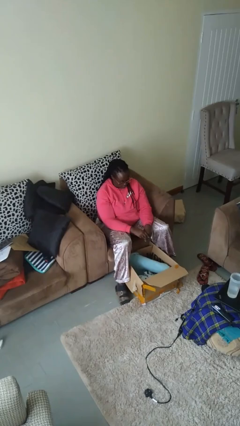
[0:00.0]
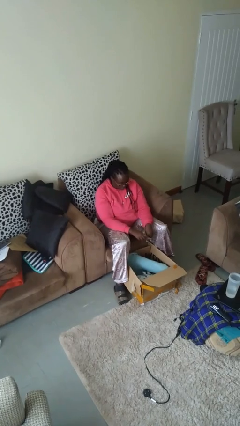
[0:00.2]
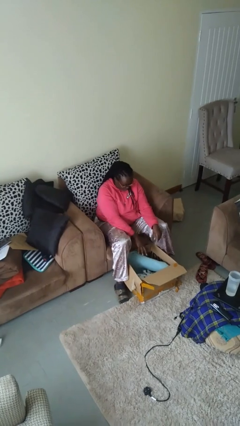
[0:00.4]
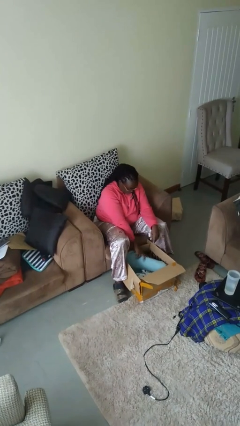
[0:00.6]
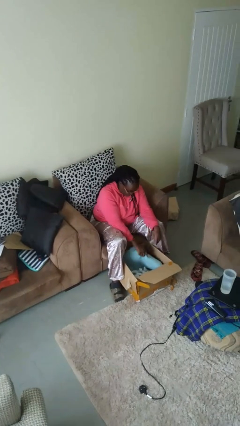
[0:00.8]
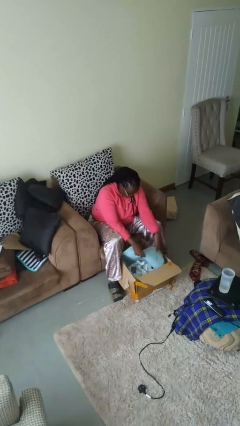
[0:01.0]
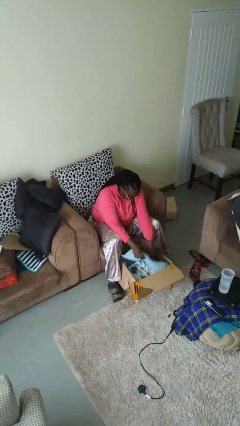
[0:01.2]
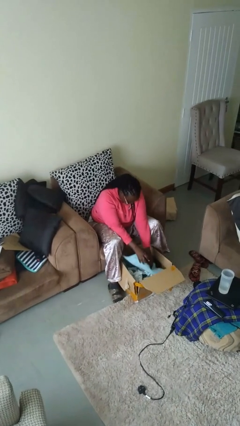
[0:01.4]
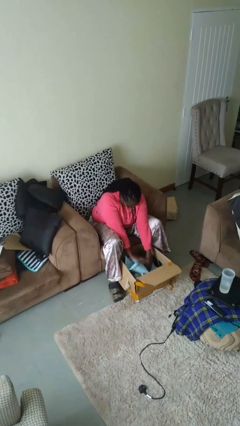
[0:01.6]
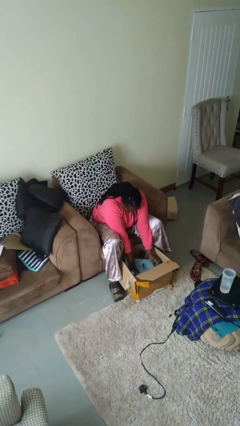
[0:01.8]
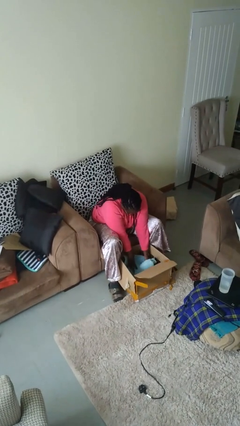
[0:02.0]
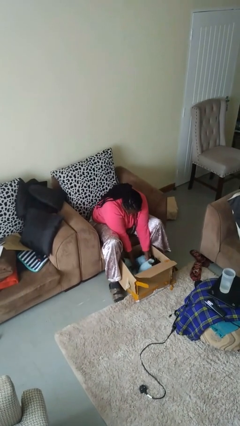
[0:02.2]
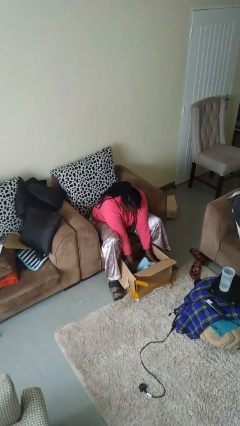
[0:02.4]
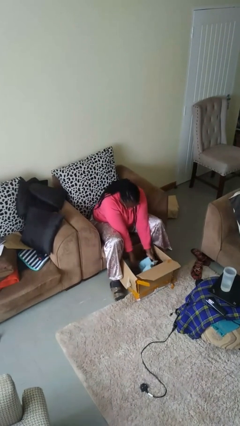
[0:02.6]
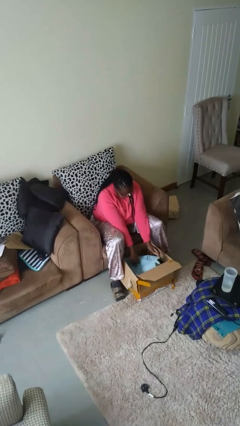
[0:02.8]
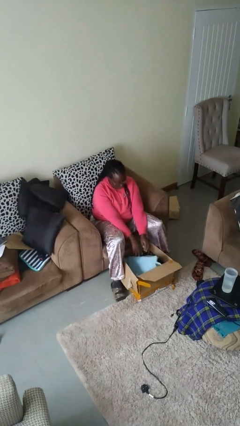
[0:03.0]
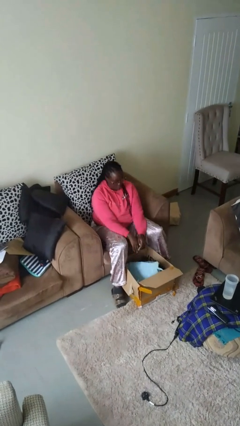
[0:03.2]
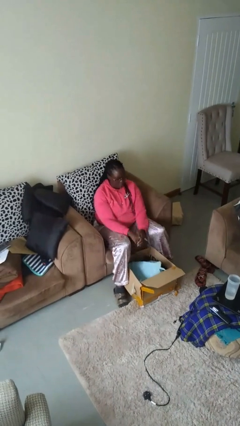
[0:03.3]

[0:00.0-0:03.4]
person searches in box

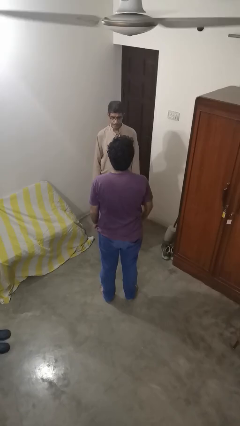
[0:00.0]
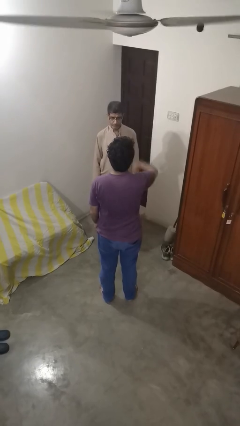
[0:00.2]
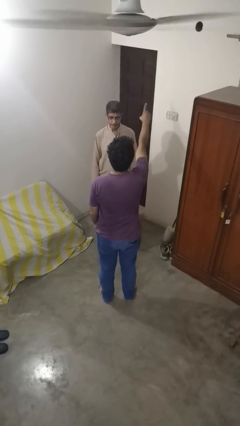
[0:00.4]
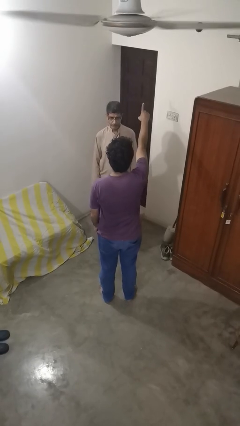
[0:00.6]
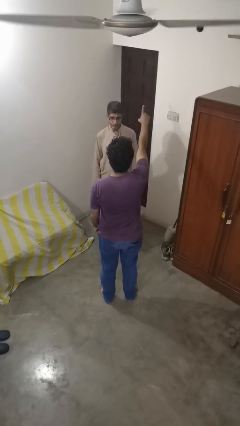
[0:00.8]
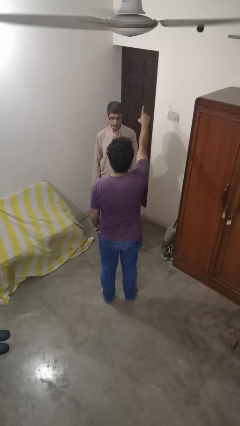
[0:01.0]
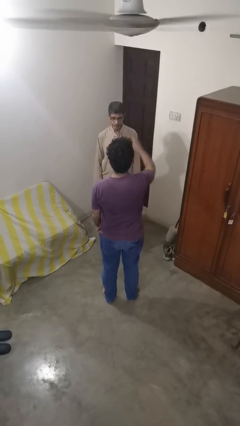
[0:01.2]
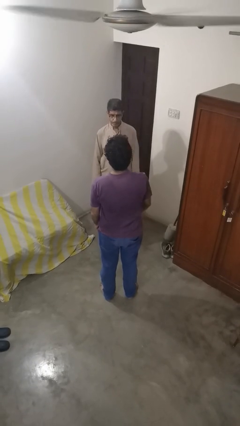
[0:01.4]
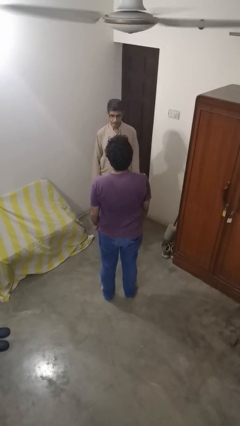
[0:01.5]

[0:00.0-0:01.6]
person shoves person

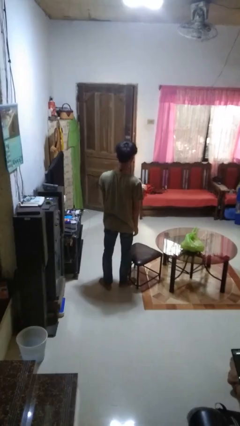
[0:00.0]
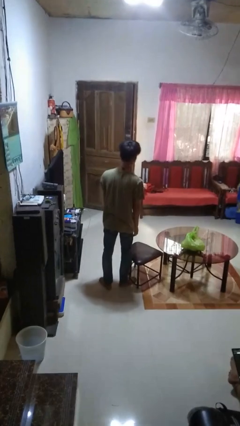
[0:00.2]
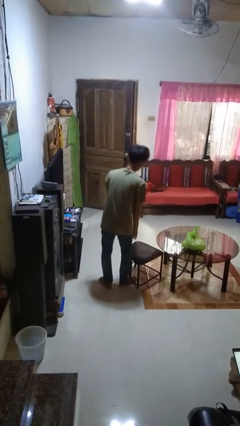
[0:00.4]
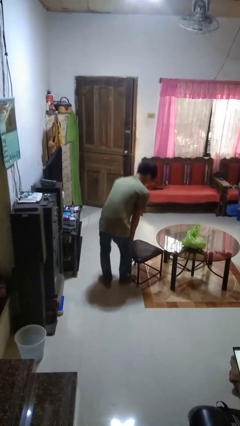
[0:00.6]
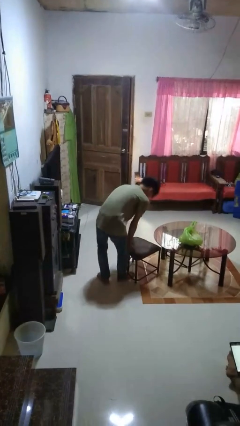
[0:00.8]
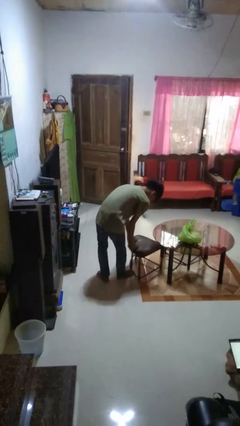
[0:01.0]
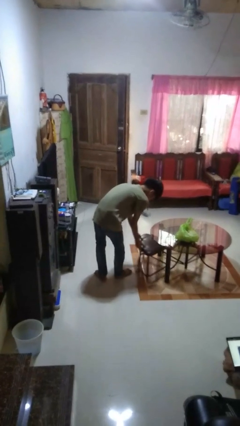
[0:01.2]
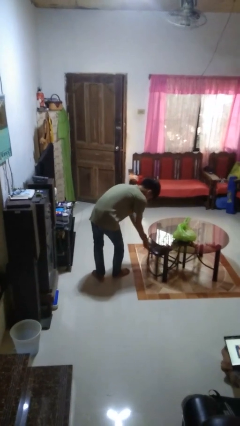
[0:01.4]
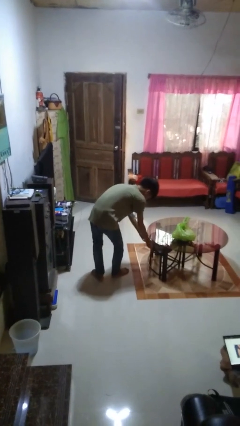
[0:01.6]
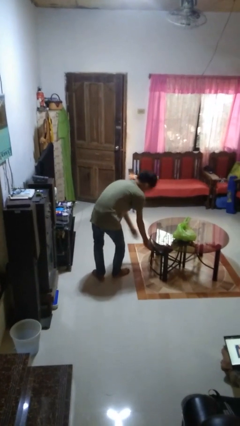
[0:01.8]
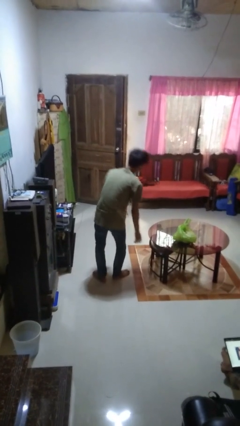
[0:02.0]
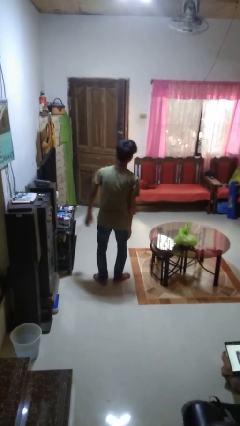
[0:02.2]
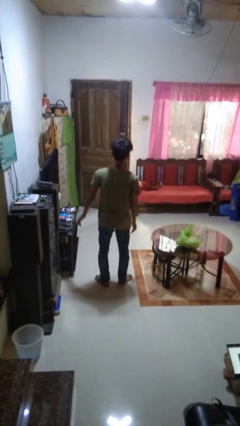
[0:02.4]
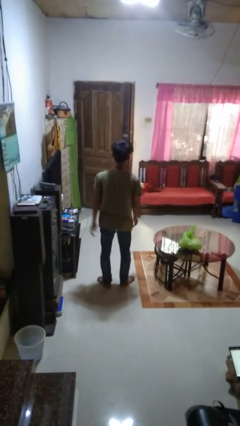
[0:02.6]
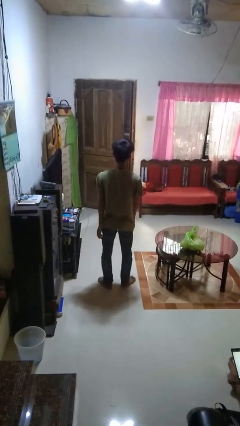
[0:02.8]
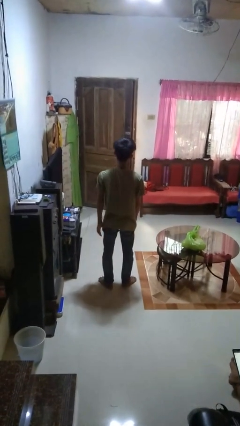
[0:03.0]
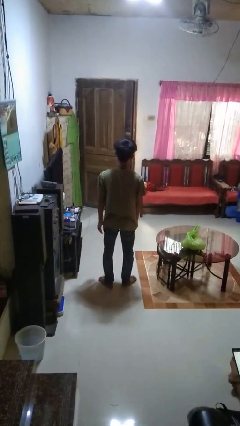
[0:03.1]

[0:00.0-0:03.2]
person pushes in chair

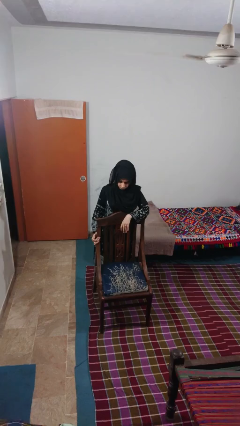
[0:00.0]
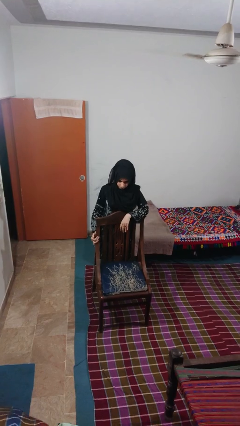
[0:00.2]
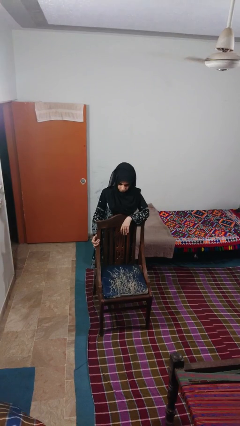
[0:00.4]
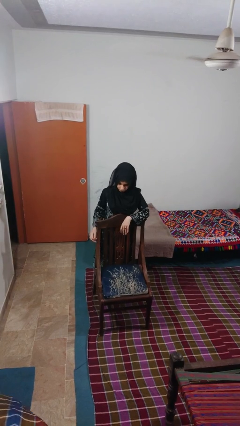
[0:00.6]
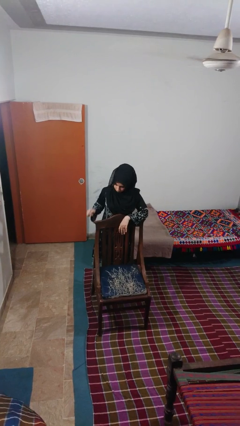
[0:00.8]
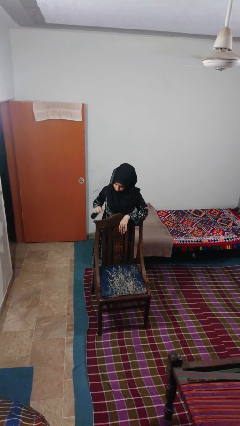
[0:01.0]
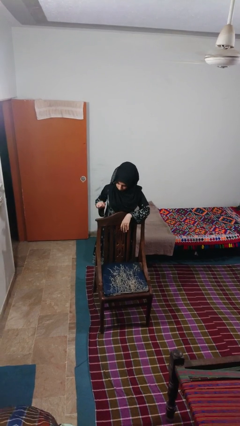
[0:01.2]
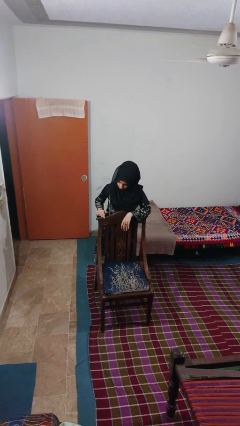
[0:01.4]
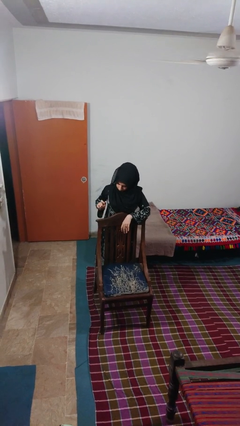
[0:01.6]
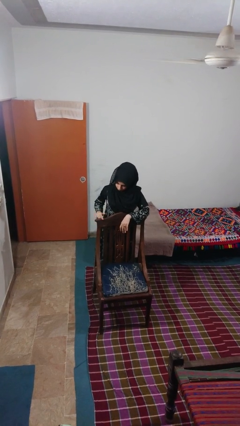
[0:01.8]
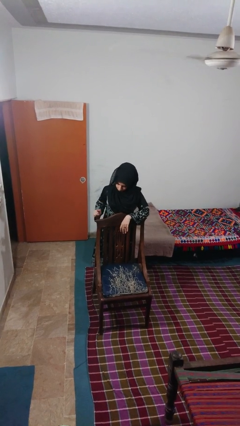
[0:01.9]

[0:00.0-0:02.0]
person taps object with finger

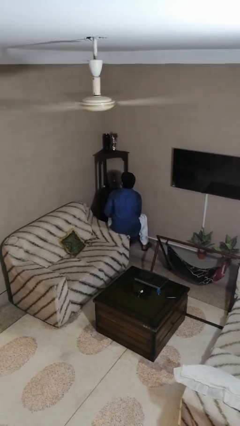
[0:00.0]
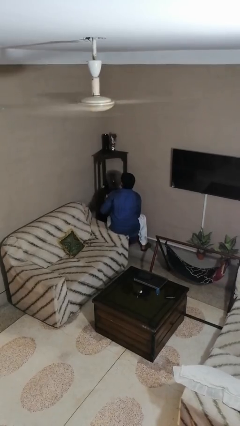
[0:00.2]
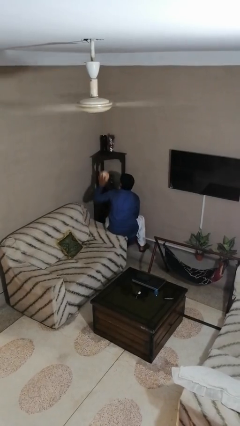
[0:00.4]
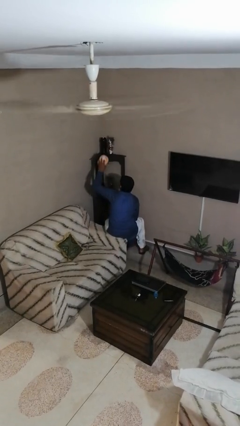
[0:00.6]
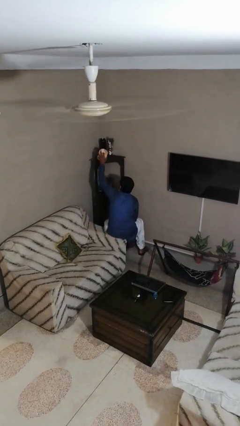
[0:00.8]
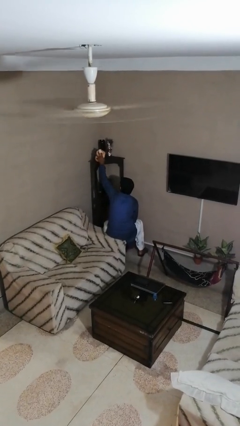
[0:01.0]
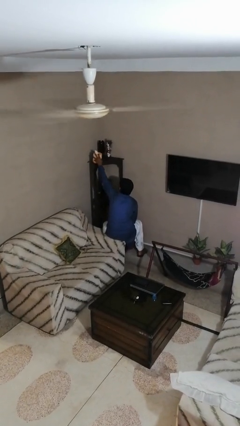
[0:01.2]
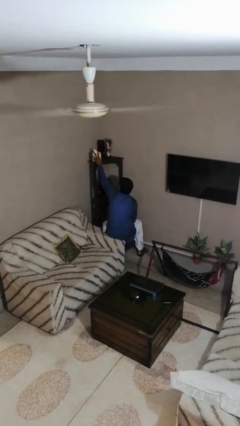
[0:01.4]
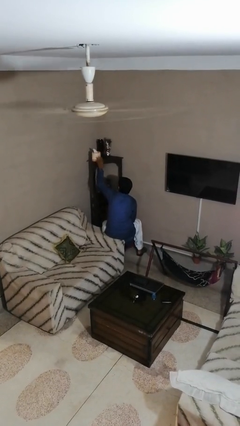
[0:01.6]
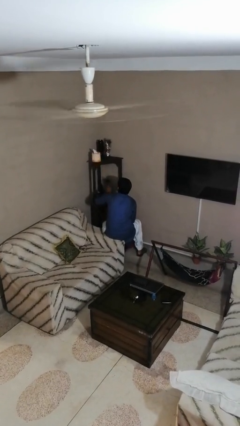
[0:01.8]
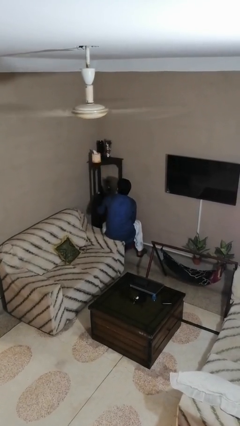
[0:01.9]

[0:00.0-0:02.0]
person puts down object on shelf

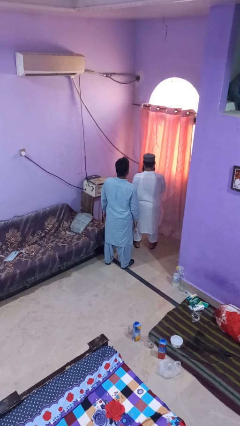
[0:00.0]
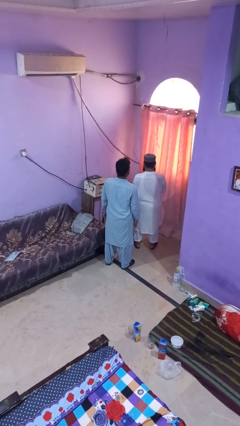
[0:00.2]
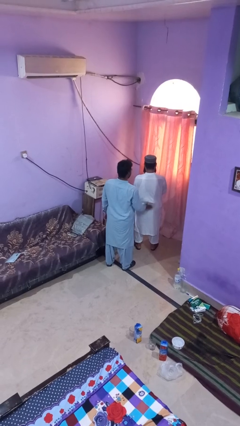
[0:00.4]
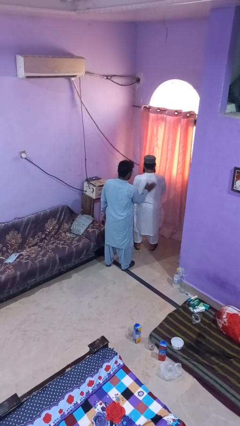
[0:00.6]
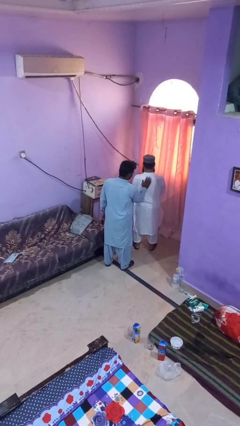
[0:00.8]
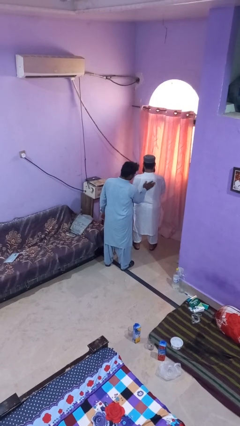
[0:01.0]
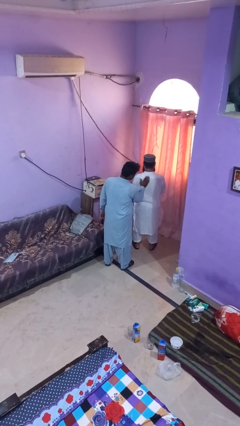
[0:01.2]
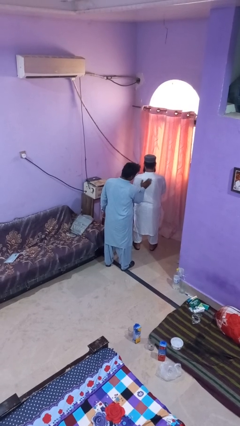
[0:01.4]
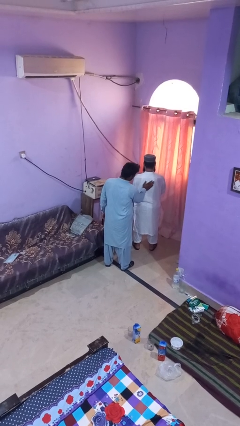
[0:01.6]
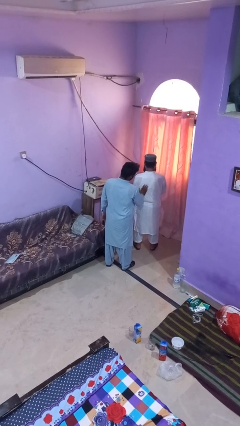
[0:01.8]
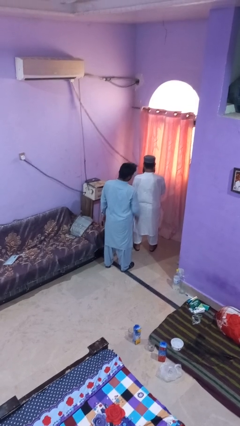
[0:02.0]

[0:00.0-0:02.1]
person touches back of person

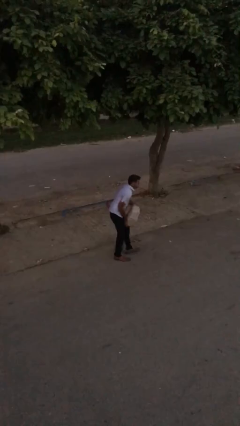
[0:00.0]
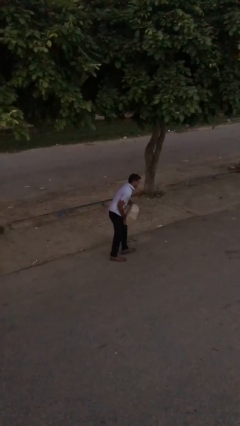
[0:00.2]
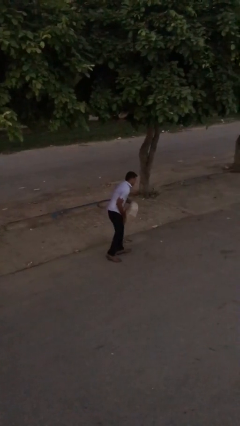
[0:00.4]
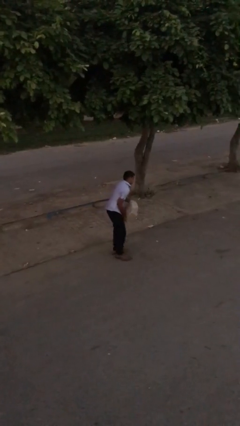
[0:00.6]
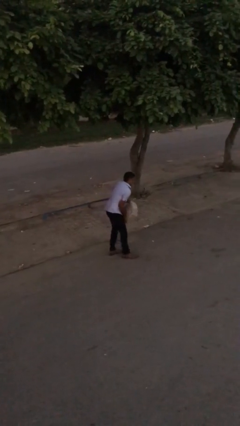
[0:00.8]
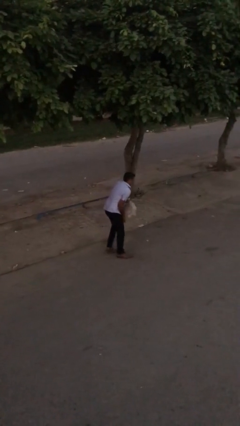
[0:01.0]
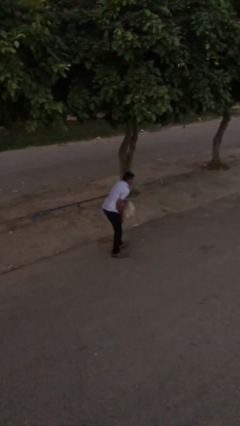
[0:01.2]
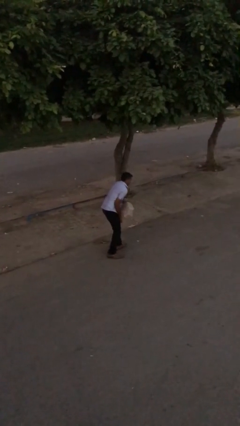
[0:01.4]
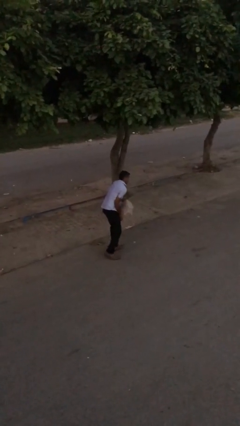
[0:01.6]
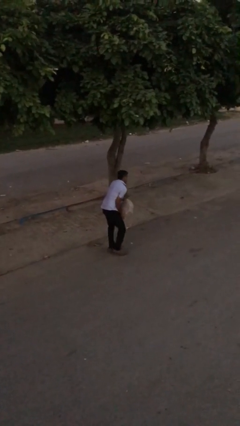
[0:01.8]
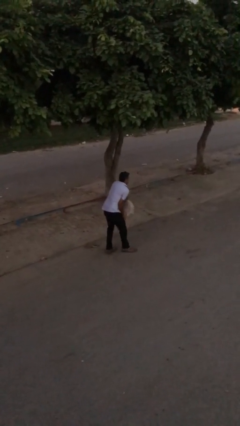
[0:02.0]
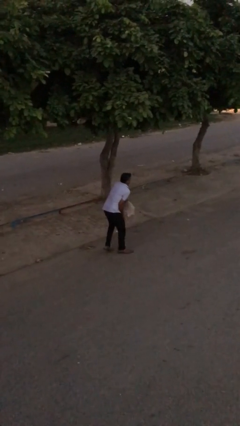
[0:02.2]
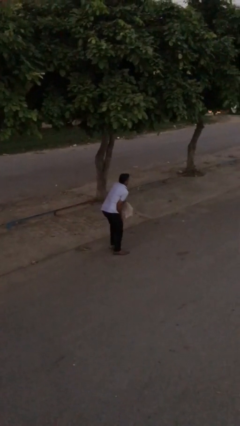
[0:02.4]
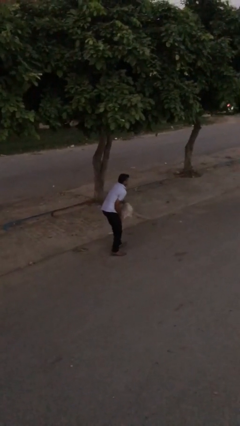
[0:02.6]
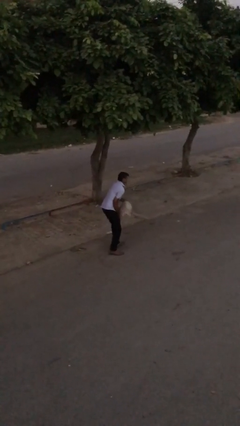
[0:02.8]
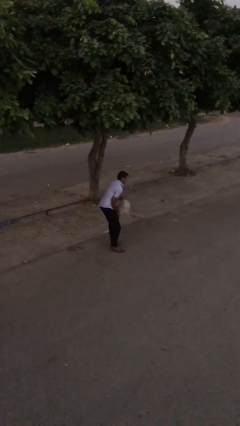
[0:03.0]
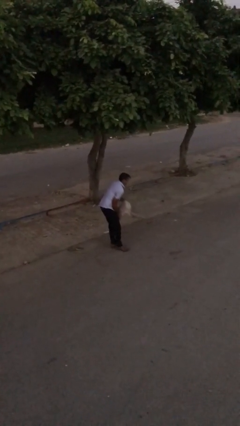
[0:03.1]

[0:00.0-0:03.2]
person carries heavy object
